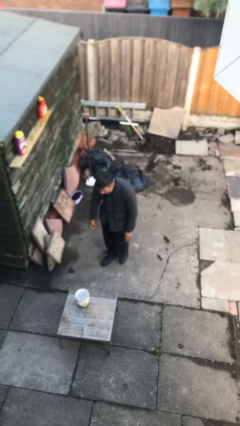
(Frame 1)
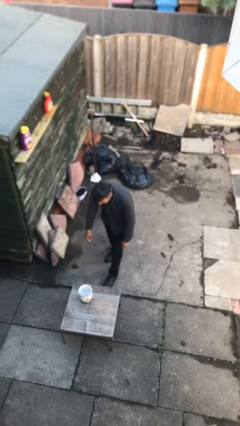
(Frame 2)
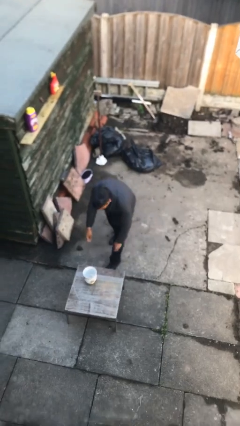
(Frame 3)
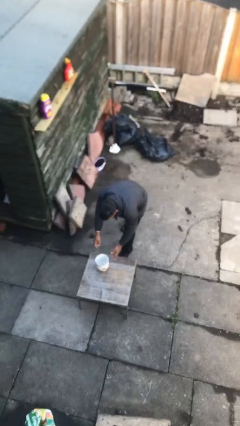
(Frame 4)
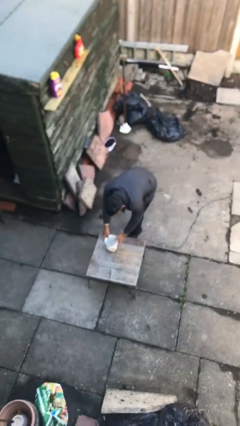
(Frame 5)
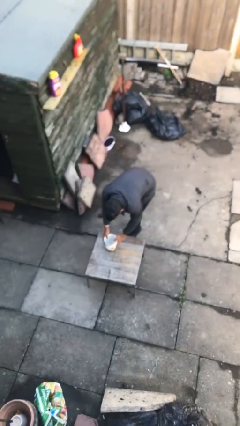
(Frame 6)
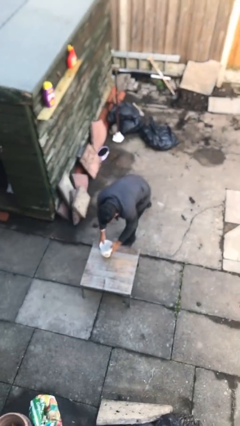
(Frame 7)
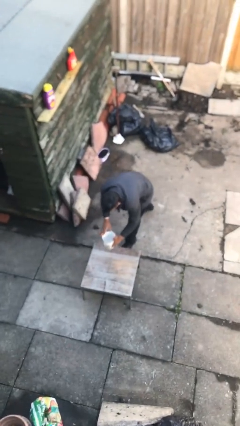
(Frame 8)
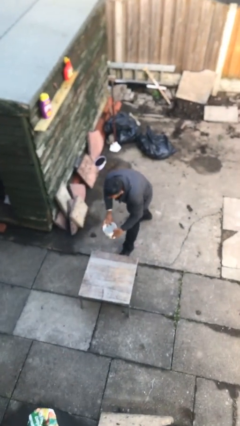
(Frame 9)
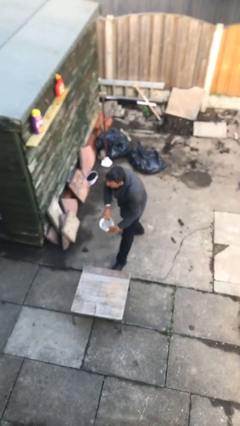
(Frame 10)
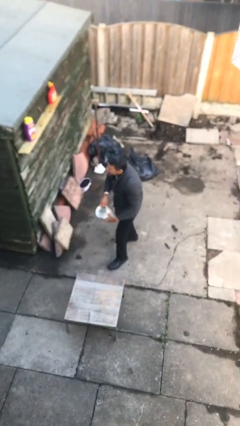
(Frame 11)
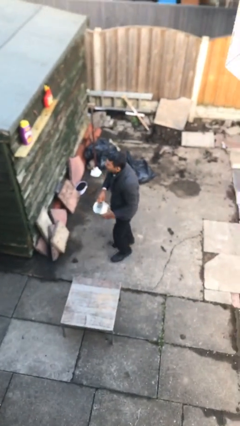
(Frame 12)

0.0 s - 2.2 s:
person picks up object from table

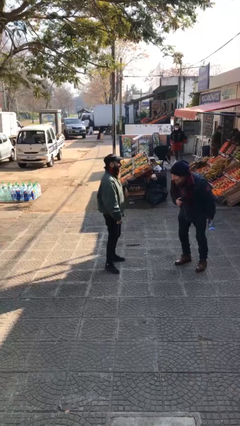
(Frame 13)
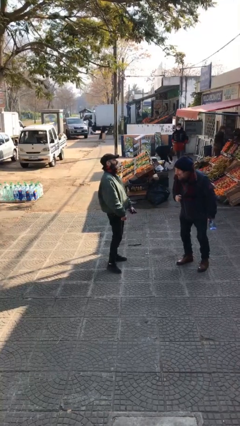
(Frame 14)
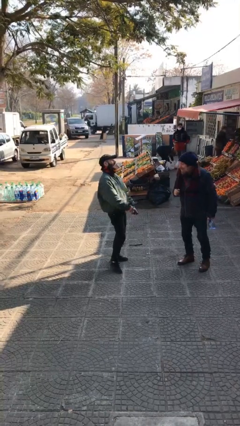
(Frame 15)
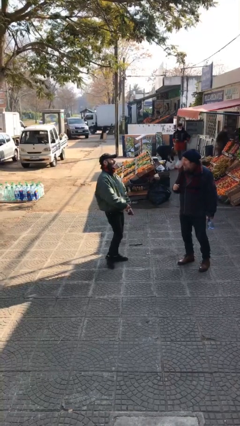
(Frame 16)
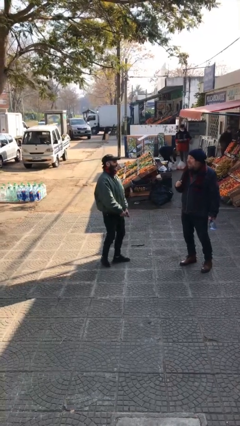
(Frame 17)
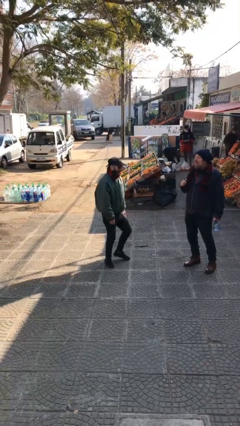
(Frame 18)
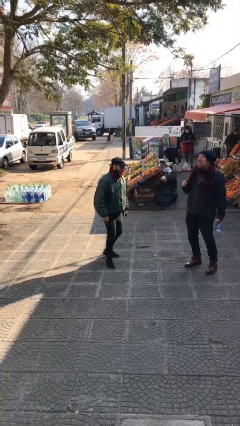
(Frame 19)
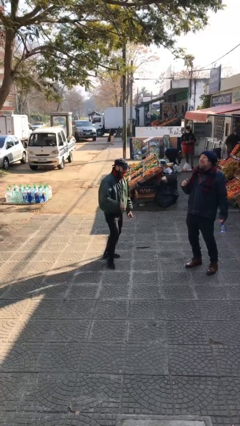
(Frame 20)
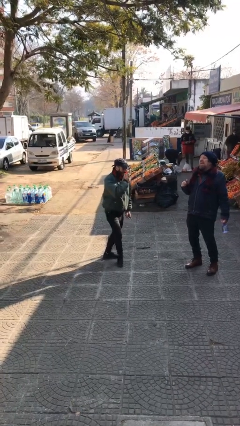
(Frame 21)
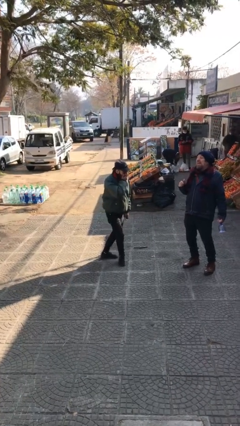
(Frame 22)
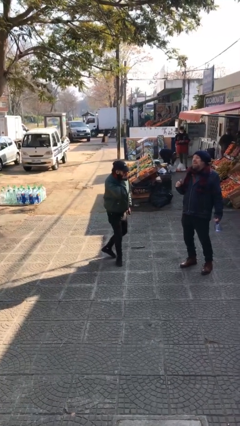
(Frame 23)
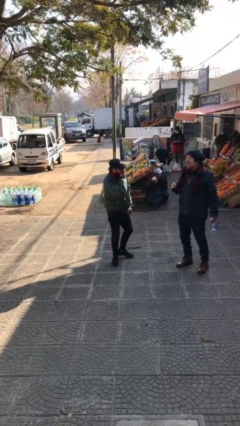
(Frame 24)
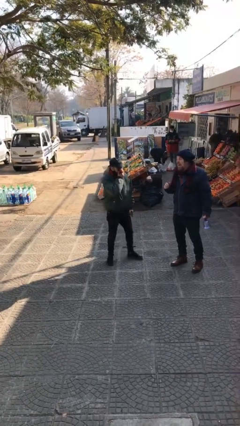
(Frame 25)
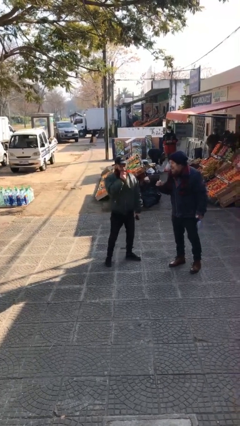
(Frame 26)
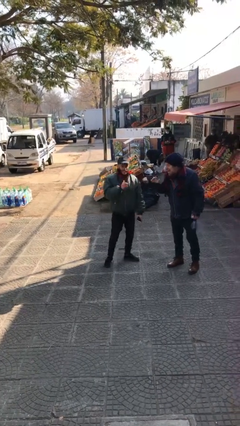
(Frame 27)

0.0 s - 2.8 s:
person laughs with person

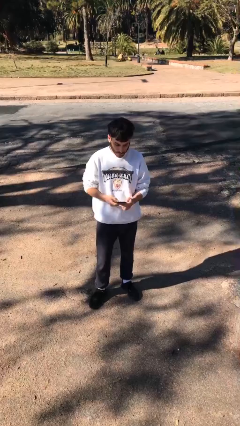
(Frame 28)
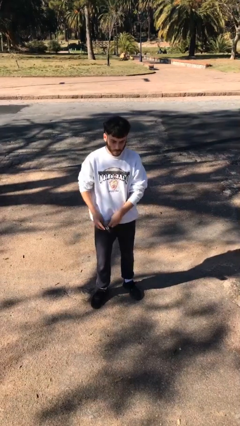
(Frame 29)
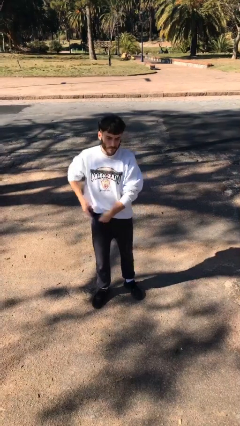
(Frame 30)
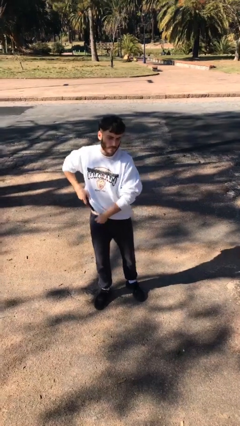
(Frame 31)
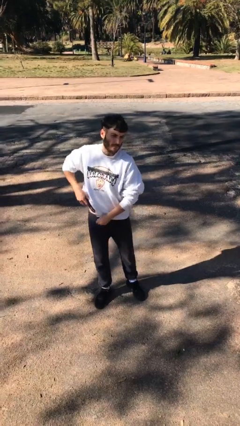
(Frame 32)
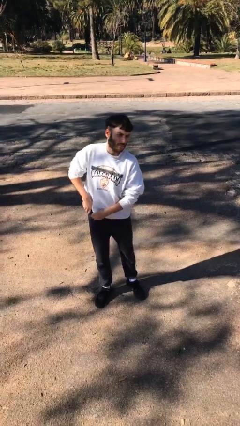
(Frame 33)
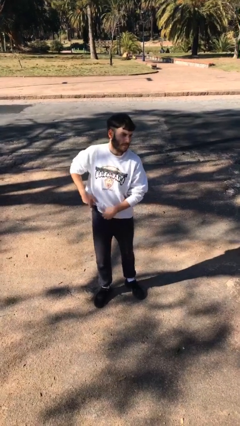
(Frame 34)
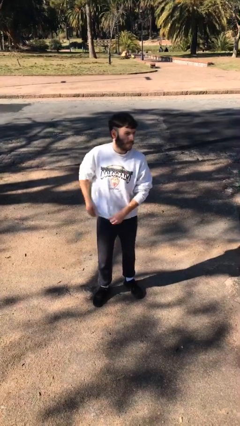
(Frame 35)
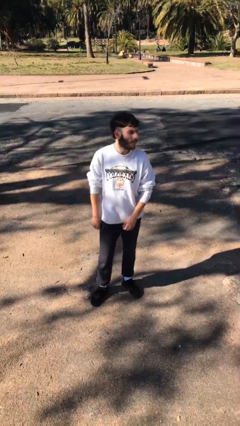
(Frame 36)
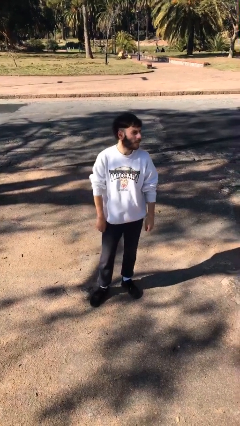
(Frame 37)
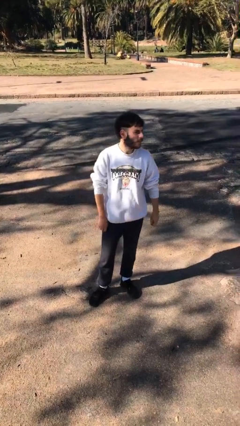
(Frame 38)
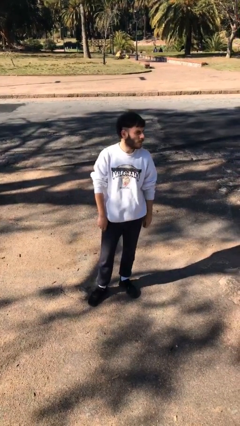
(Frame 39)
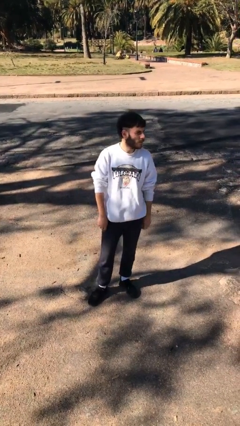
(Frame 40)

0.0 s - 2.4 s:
person puts phone into pocket

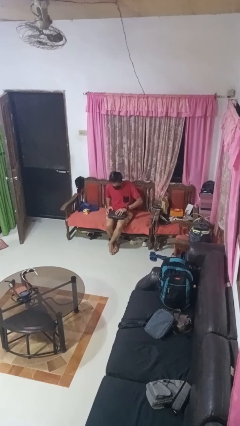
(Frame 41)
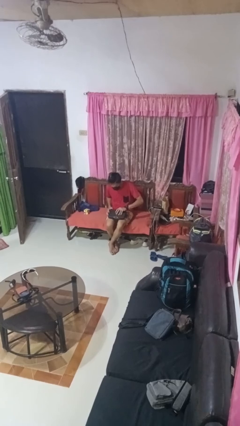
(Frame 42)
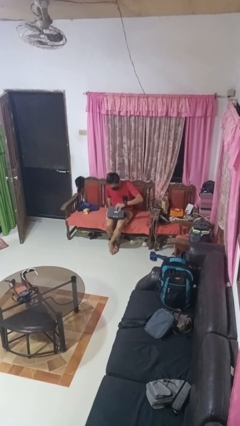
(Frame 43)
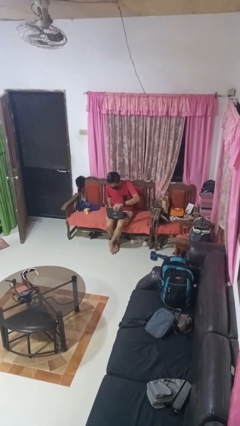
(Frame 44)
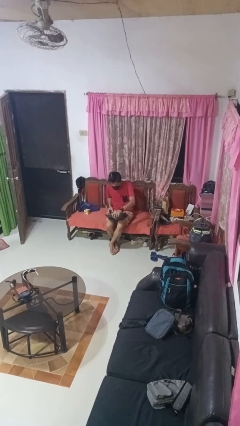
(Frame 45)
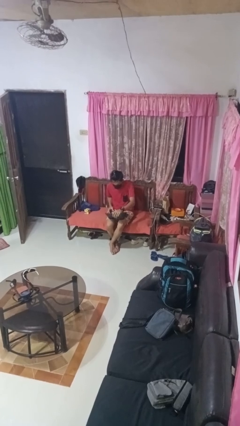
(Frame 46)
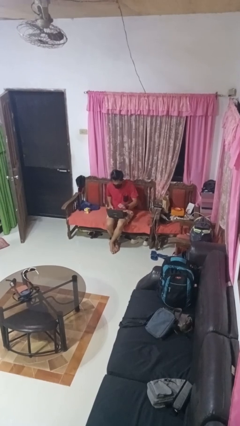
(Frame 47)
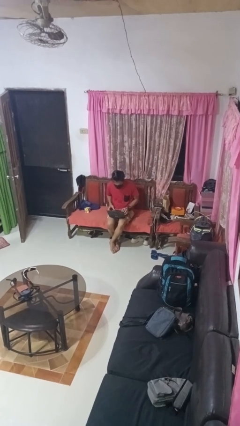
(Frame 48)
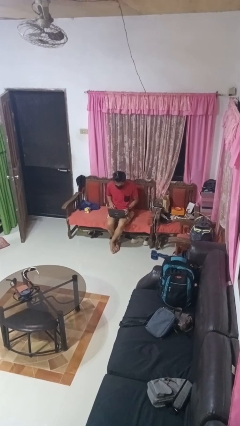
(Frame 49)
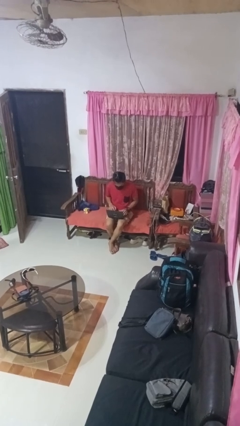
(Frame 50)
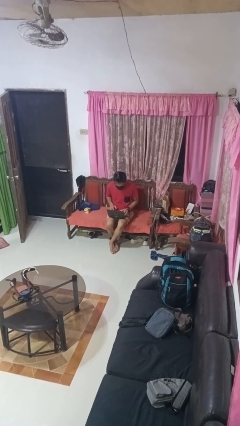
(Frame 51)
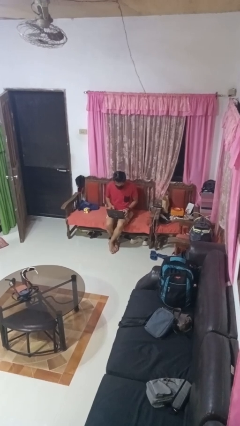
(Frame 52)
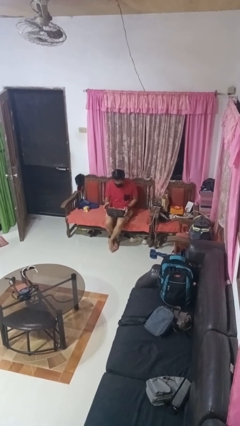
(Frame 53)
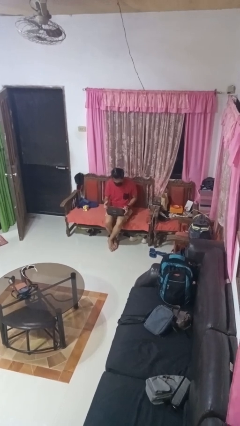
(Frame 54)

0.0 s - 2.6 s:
person opens laptop

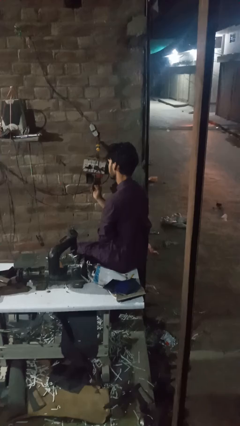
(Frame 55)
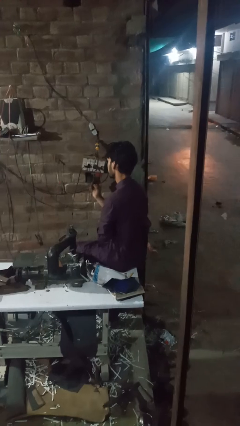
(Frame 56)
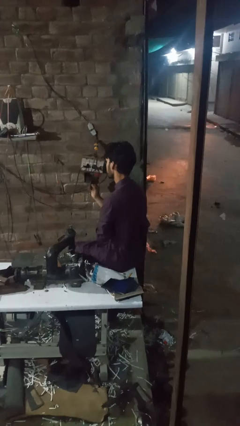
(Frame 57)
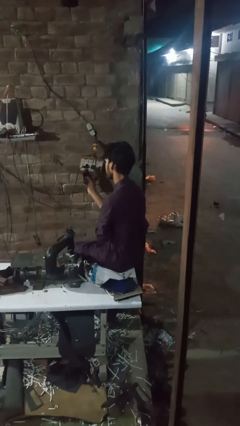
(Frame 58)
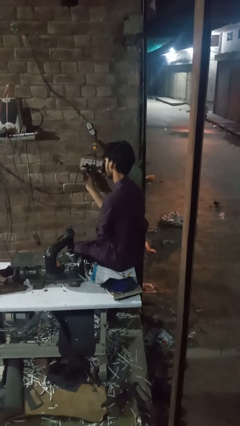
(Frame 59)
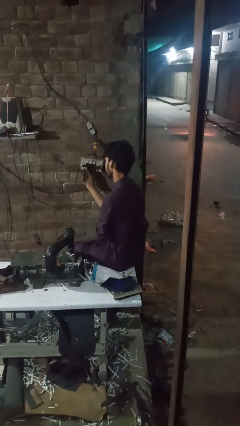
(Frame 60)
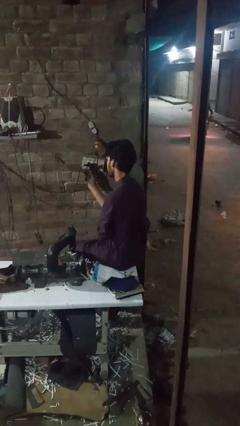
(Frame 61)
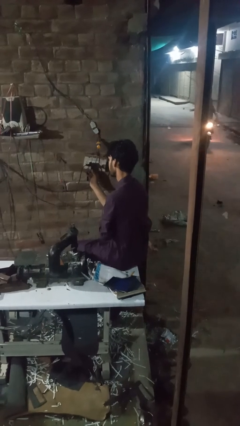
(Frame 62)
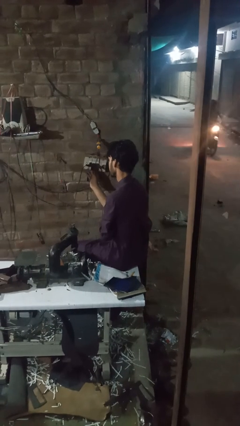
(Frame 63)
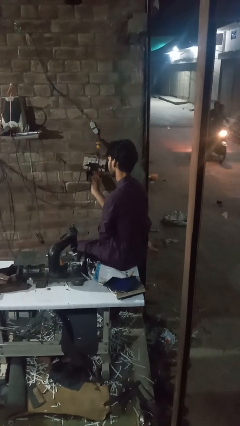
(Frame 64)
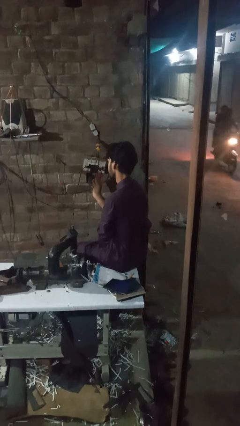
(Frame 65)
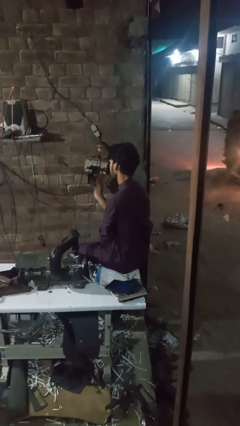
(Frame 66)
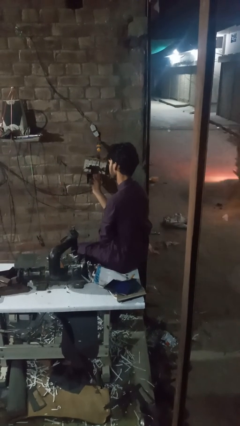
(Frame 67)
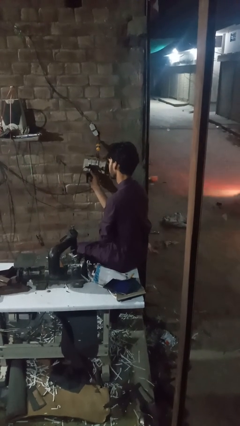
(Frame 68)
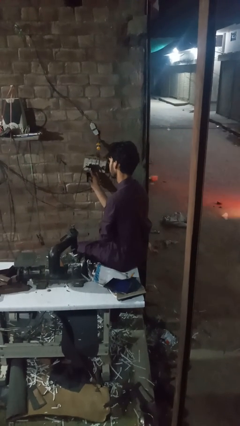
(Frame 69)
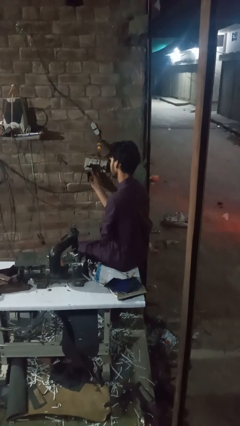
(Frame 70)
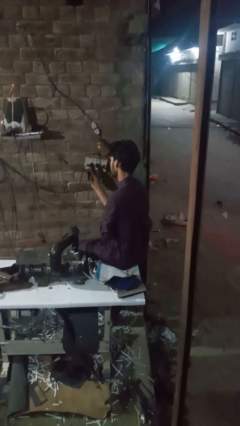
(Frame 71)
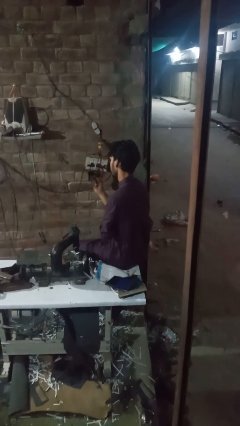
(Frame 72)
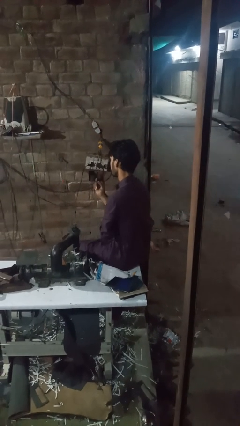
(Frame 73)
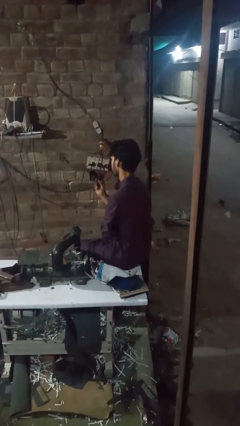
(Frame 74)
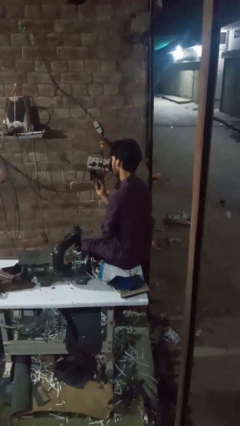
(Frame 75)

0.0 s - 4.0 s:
person plugs into electrical socket

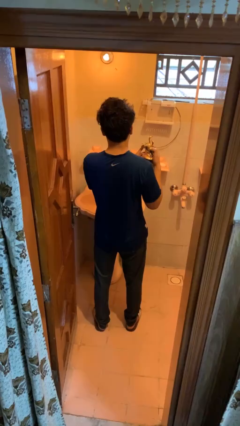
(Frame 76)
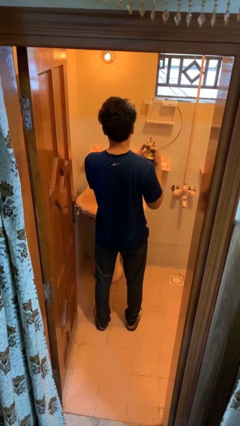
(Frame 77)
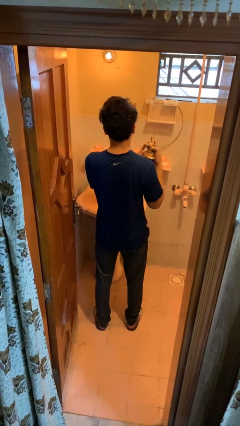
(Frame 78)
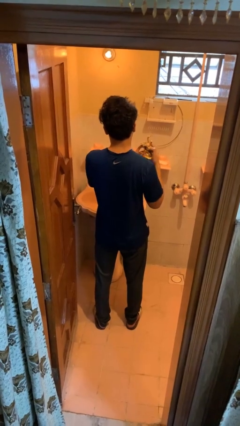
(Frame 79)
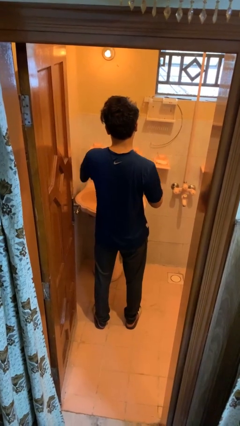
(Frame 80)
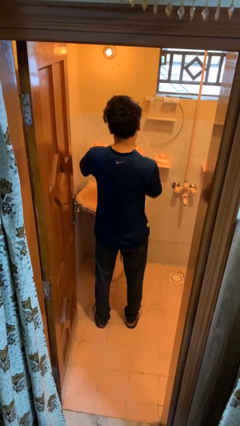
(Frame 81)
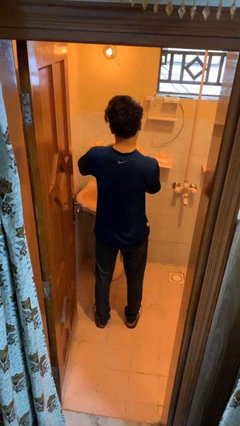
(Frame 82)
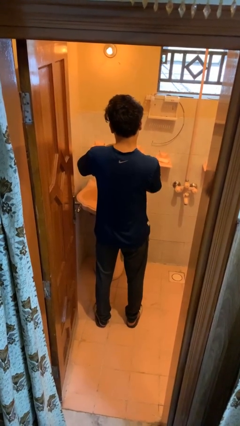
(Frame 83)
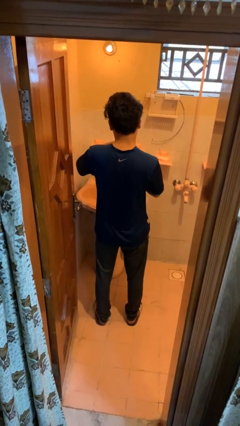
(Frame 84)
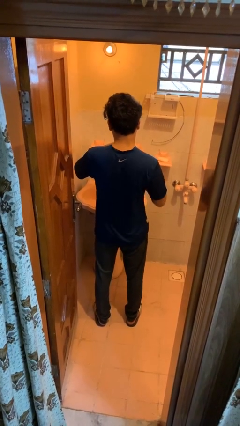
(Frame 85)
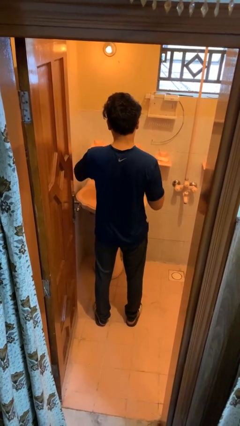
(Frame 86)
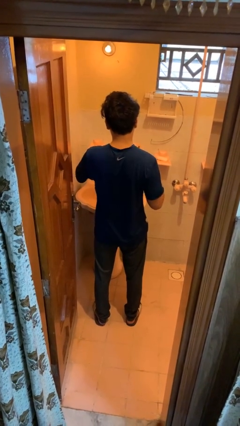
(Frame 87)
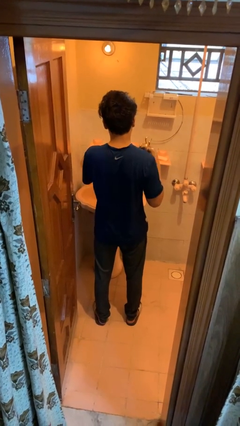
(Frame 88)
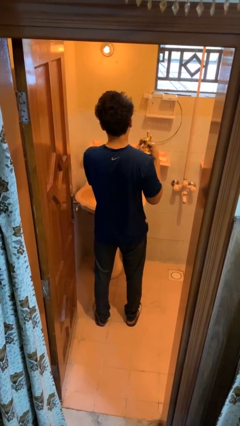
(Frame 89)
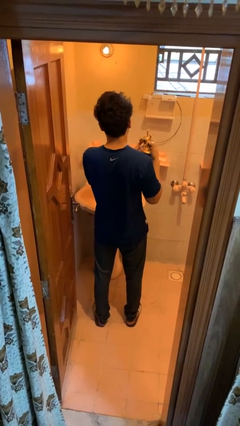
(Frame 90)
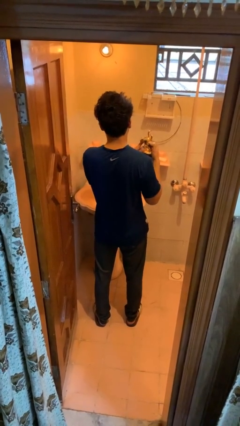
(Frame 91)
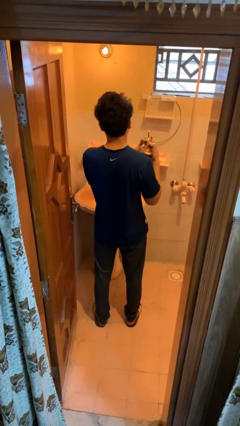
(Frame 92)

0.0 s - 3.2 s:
person applies deodorant
